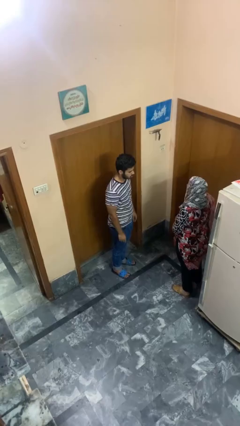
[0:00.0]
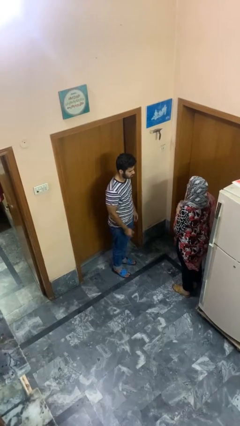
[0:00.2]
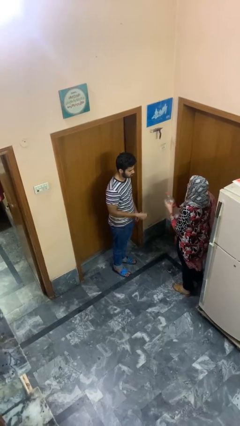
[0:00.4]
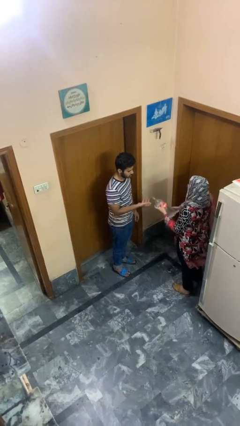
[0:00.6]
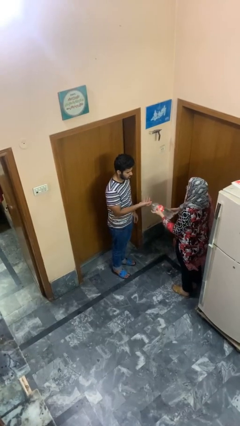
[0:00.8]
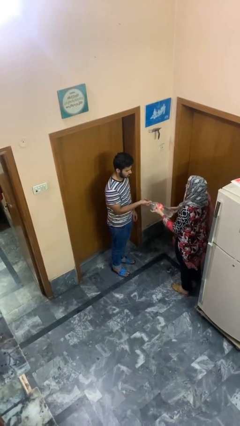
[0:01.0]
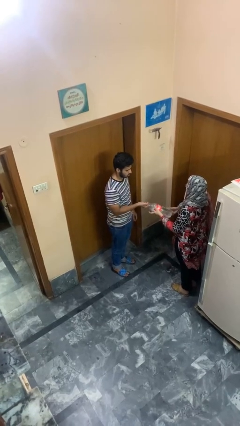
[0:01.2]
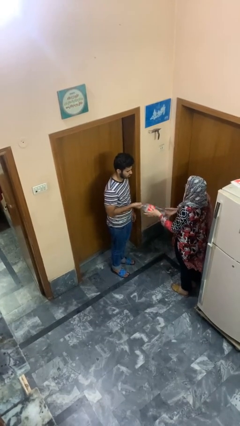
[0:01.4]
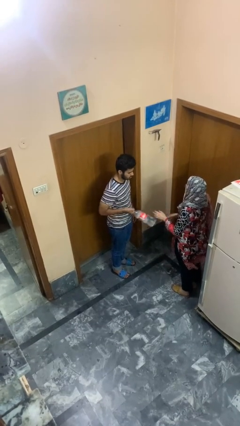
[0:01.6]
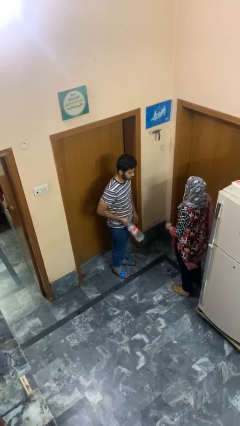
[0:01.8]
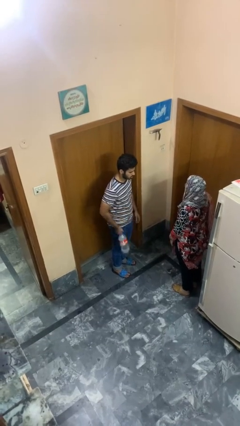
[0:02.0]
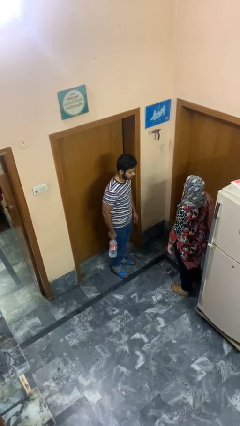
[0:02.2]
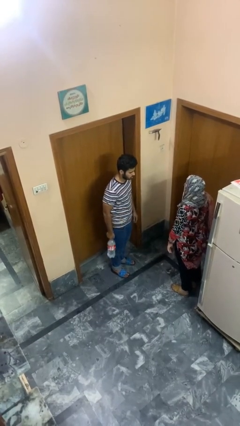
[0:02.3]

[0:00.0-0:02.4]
person transfers object to person

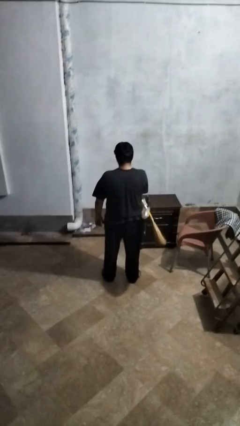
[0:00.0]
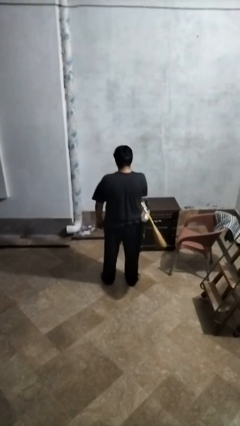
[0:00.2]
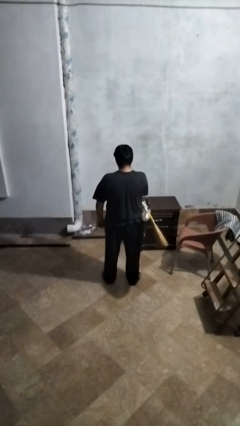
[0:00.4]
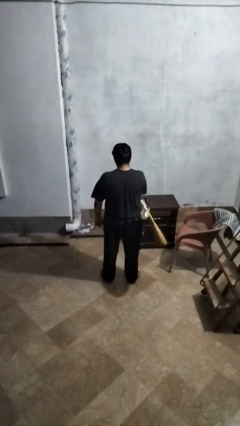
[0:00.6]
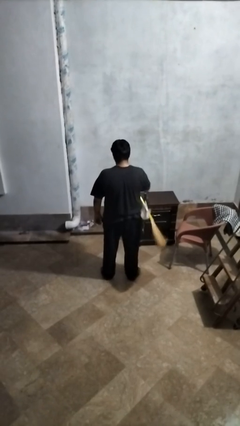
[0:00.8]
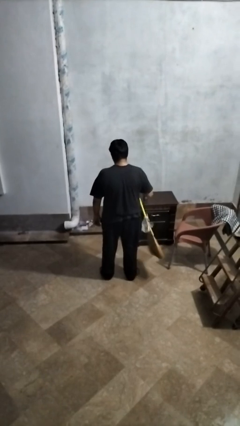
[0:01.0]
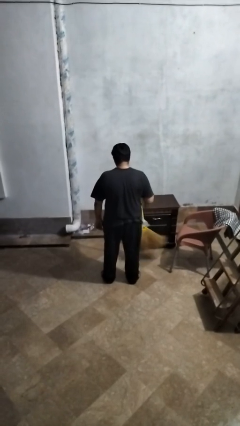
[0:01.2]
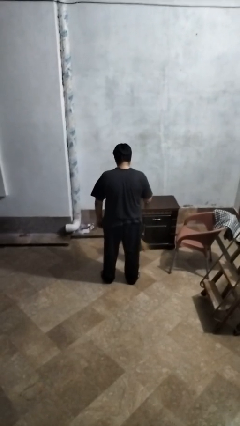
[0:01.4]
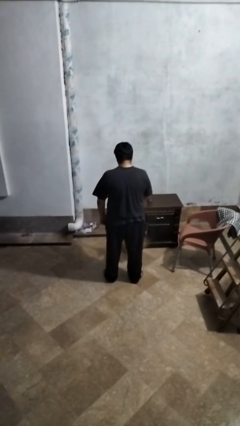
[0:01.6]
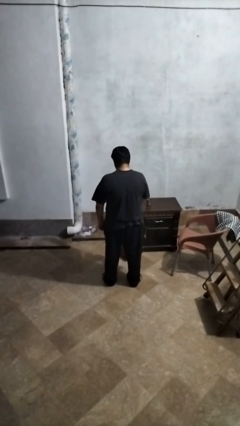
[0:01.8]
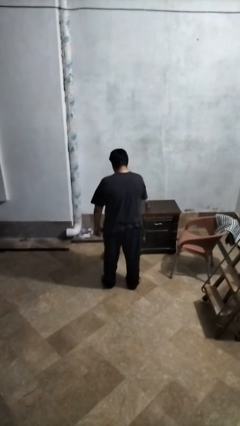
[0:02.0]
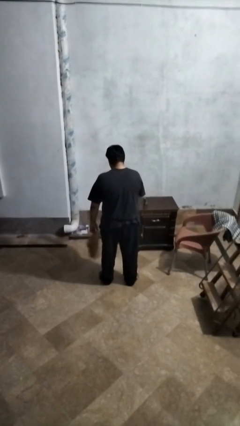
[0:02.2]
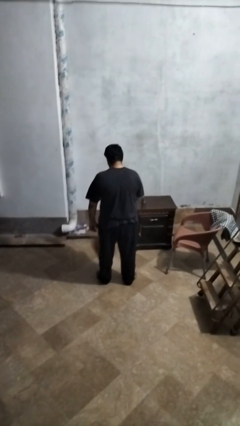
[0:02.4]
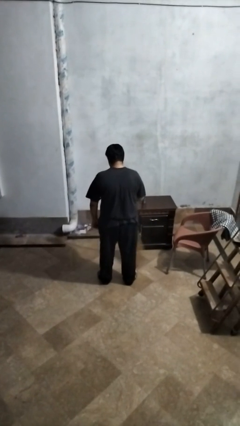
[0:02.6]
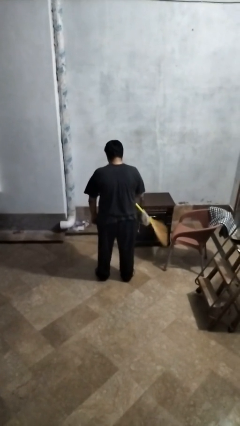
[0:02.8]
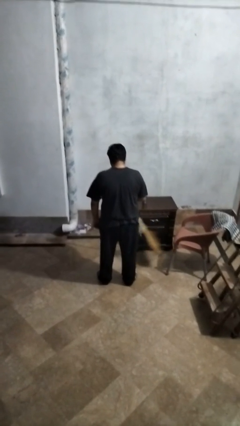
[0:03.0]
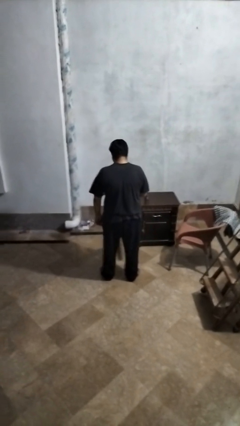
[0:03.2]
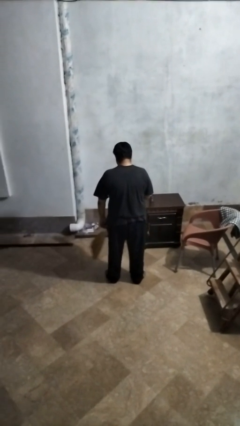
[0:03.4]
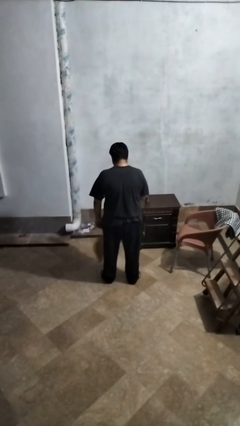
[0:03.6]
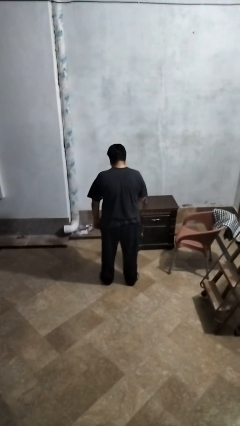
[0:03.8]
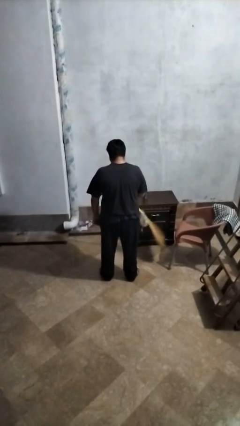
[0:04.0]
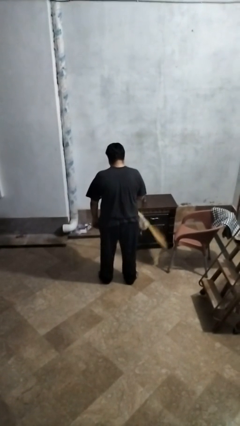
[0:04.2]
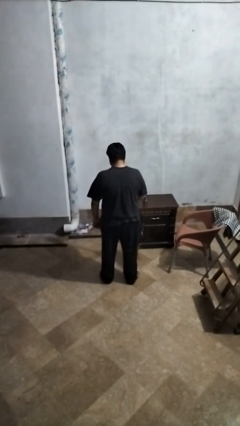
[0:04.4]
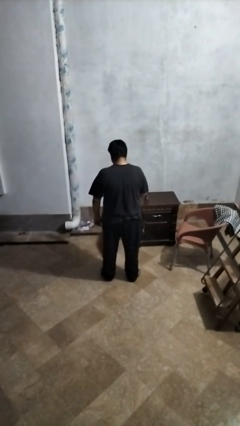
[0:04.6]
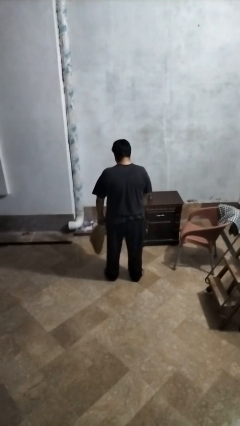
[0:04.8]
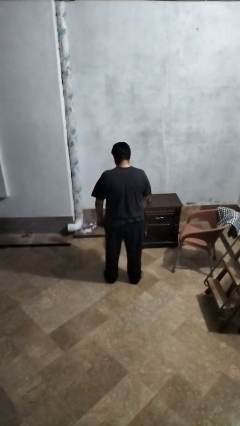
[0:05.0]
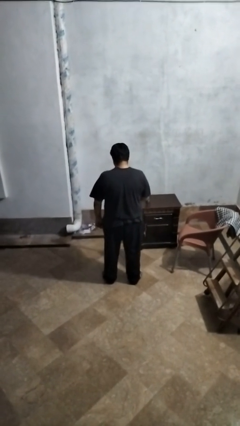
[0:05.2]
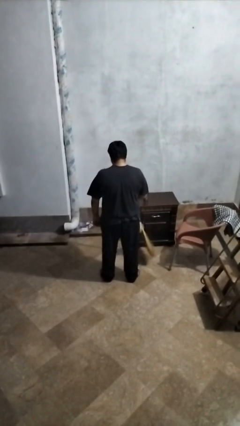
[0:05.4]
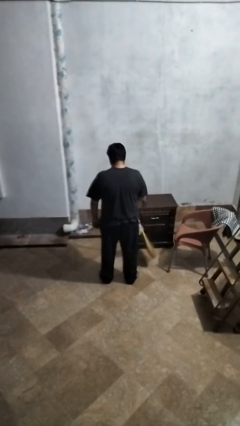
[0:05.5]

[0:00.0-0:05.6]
person mops

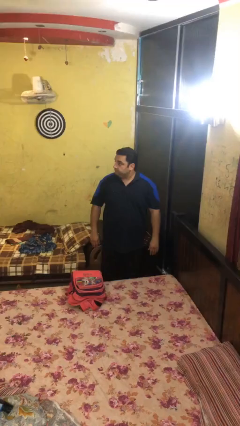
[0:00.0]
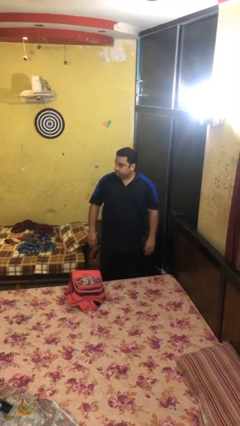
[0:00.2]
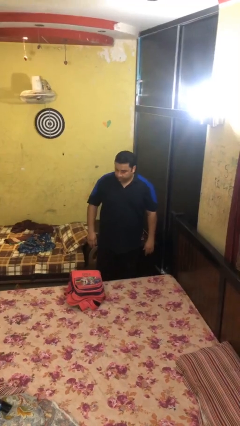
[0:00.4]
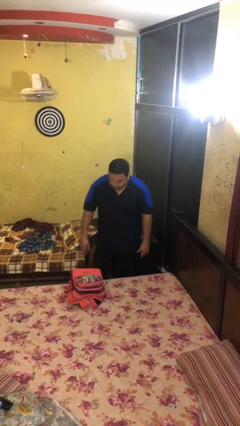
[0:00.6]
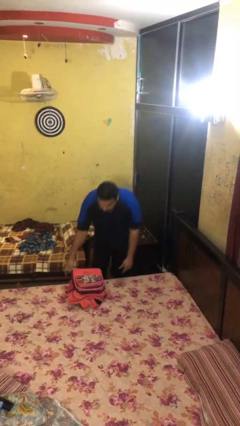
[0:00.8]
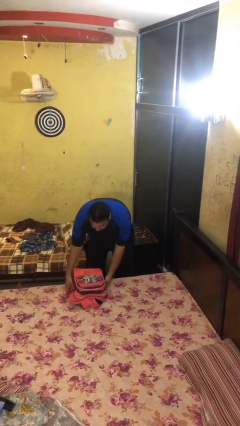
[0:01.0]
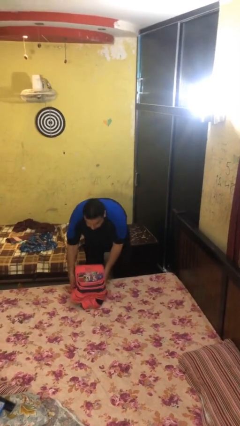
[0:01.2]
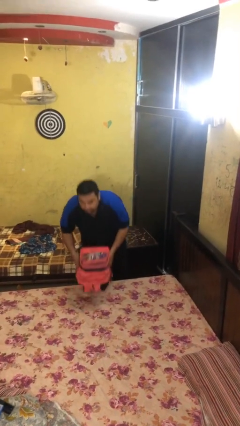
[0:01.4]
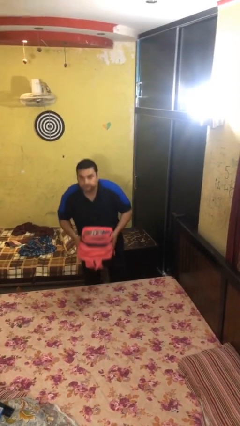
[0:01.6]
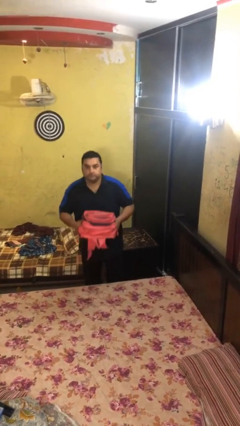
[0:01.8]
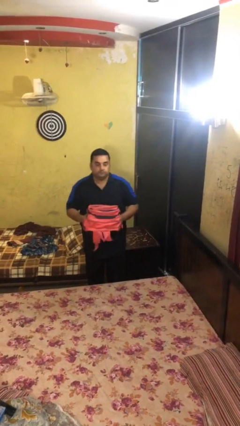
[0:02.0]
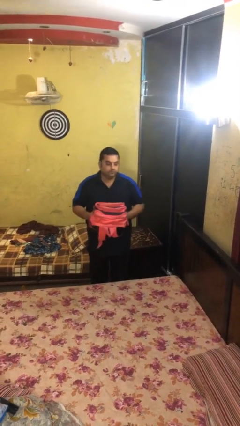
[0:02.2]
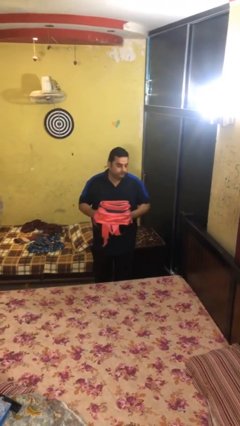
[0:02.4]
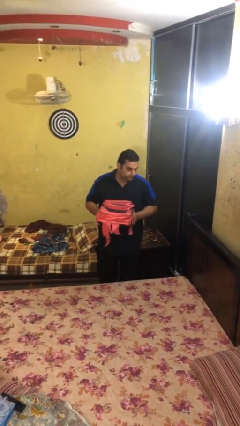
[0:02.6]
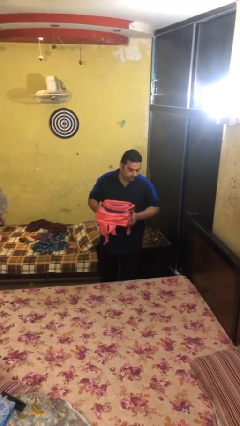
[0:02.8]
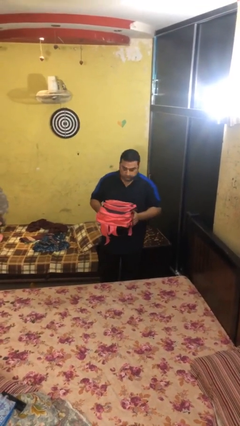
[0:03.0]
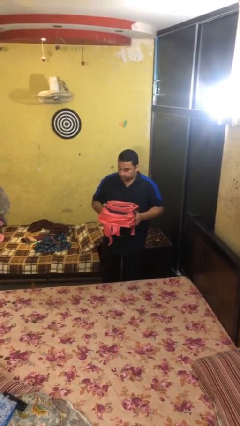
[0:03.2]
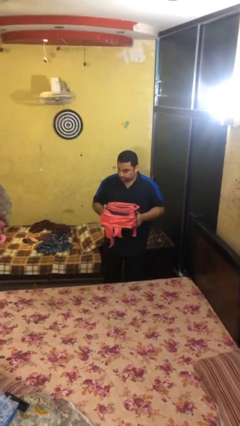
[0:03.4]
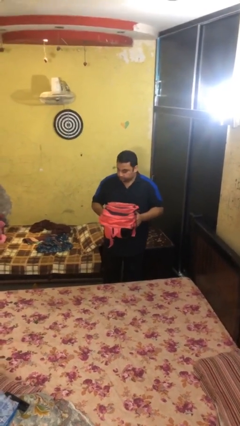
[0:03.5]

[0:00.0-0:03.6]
person picks up object from bed

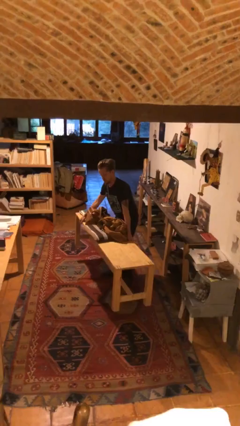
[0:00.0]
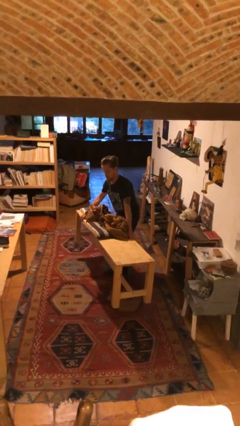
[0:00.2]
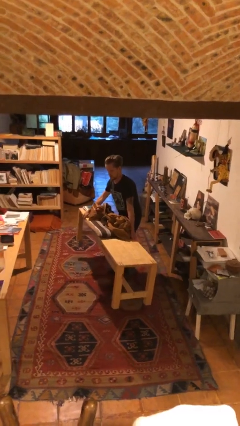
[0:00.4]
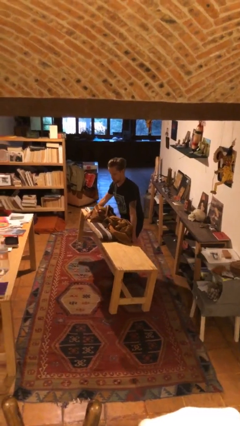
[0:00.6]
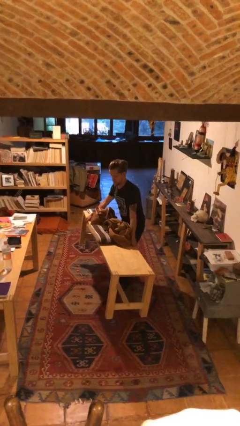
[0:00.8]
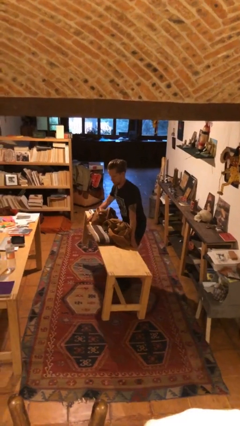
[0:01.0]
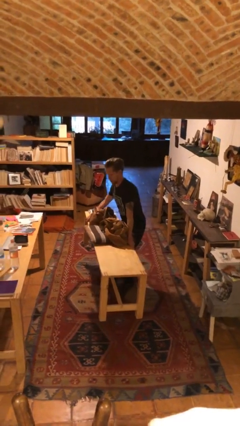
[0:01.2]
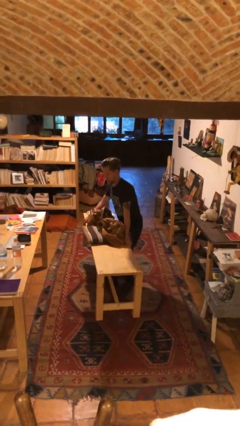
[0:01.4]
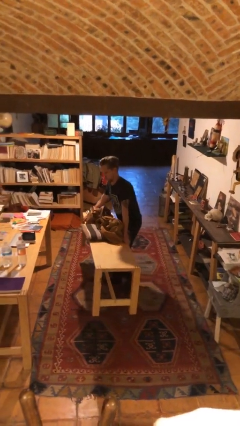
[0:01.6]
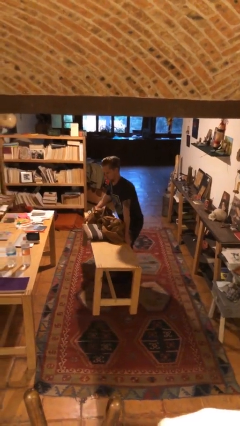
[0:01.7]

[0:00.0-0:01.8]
person carries heavy object

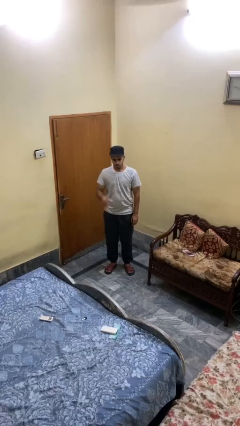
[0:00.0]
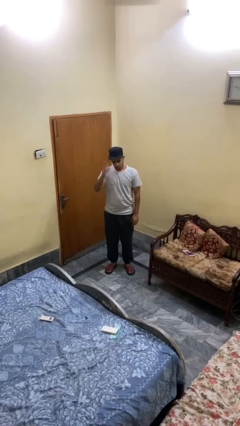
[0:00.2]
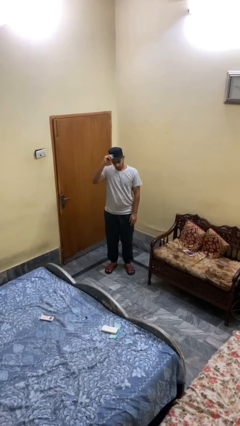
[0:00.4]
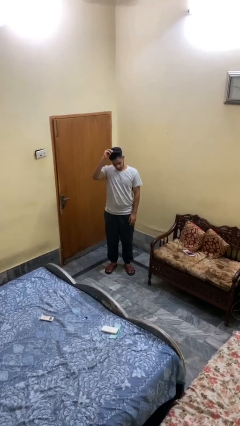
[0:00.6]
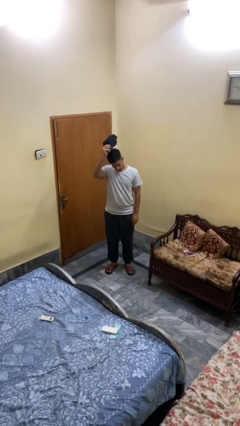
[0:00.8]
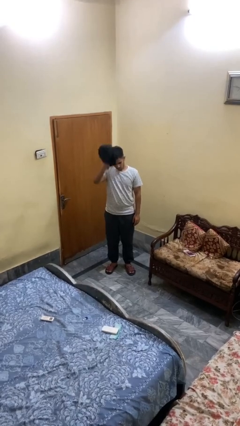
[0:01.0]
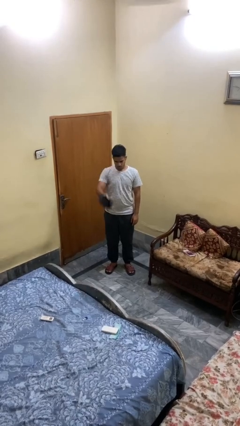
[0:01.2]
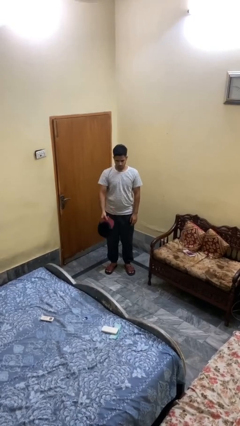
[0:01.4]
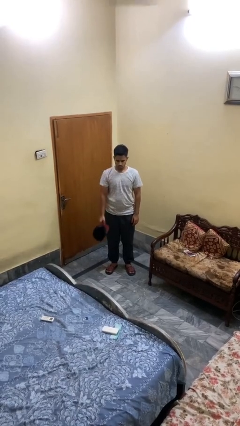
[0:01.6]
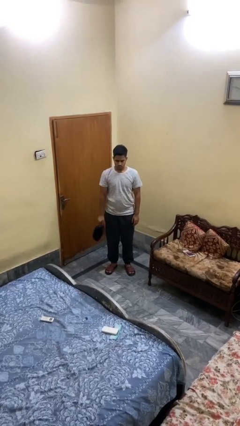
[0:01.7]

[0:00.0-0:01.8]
person takes off hat

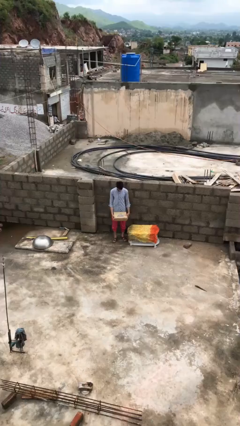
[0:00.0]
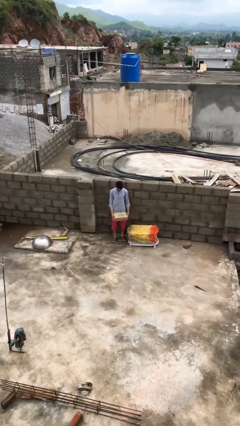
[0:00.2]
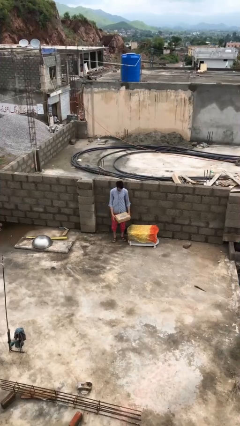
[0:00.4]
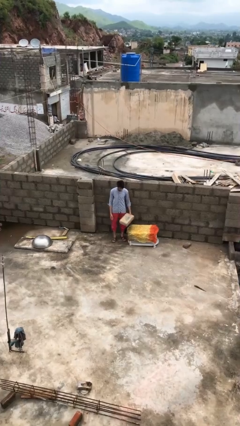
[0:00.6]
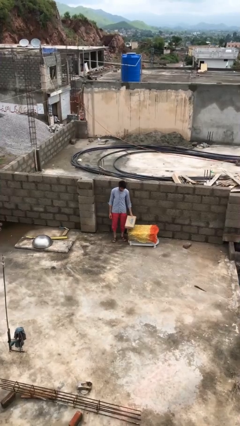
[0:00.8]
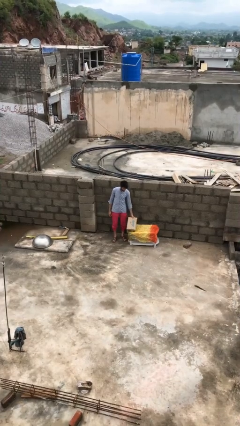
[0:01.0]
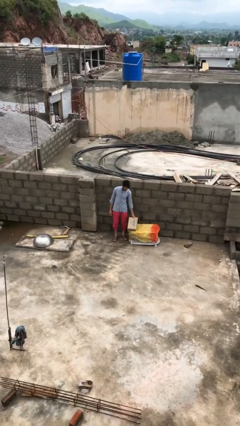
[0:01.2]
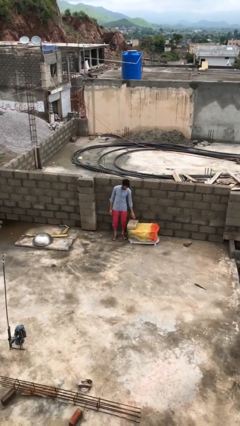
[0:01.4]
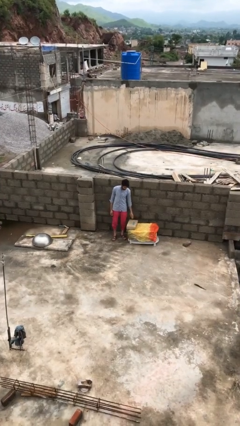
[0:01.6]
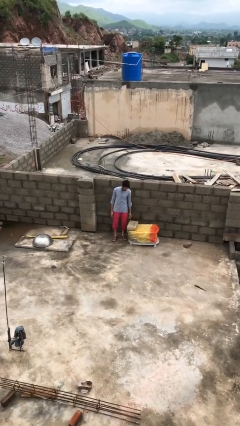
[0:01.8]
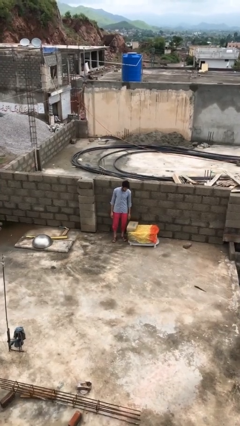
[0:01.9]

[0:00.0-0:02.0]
person puts down object on table
